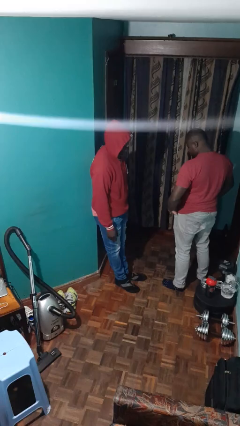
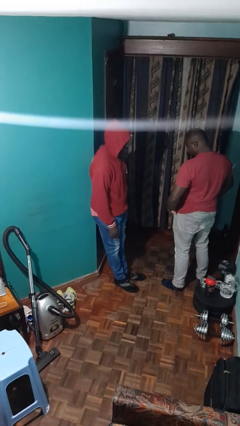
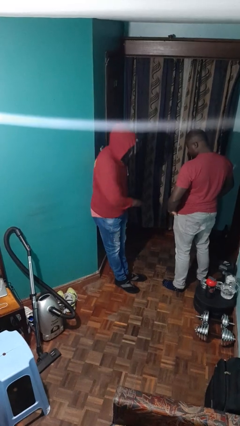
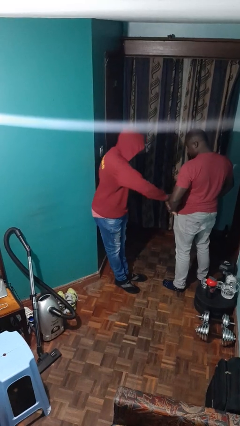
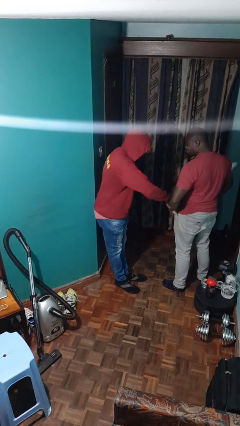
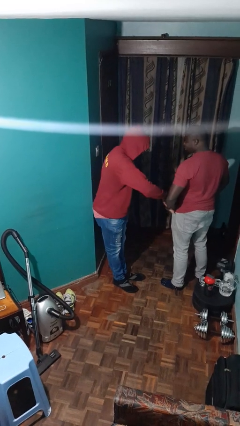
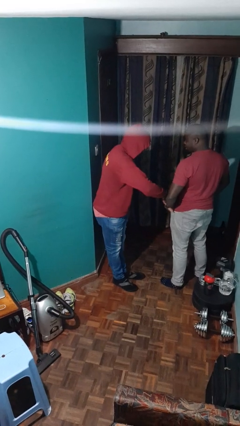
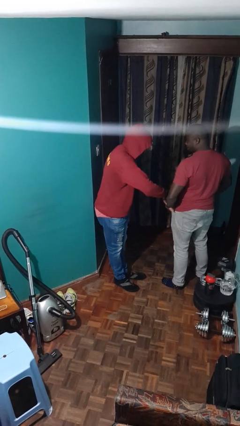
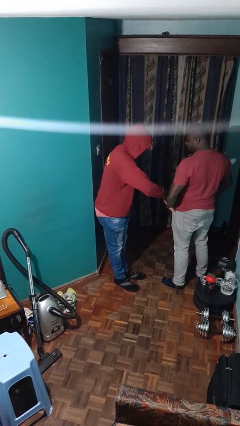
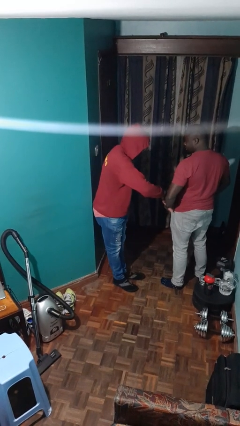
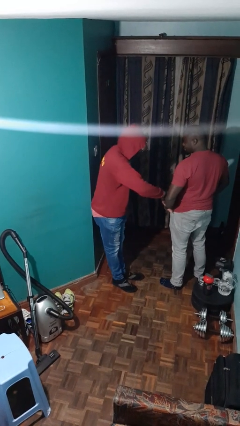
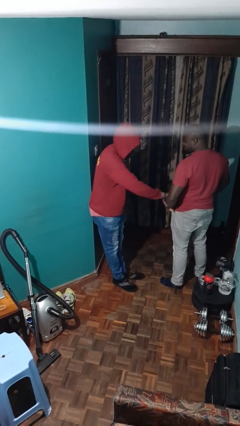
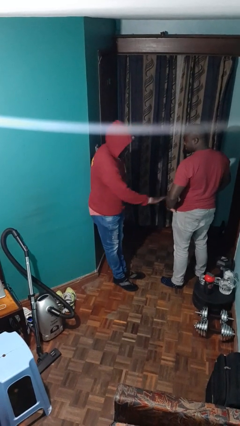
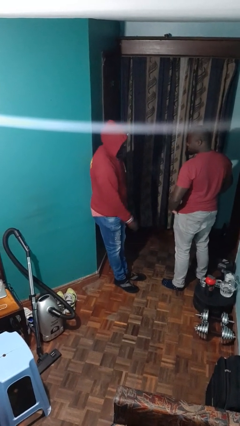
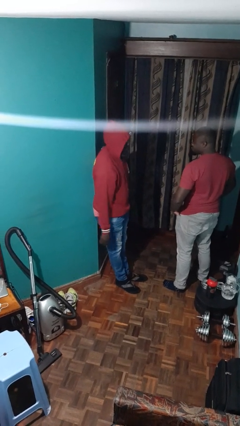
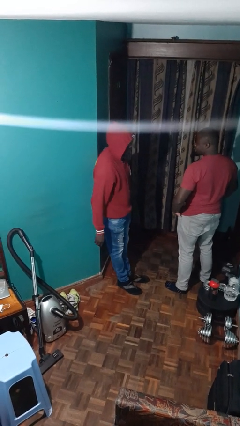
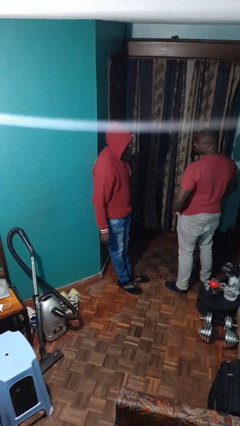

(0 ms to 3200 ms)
person grabs person by forearm

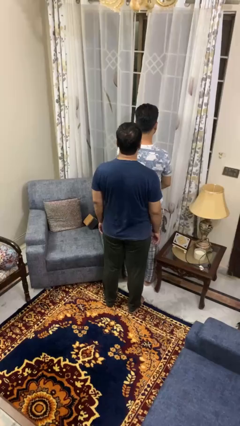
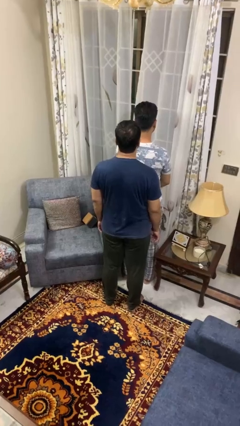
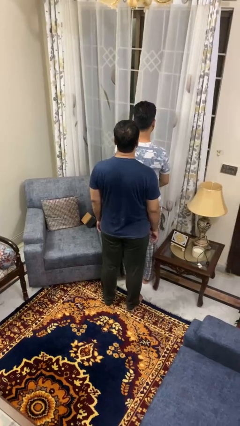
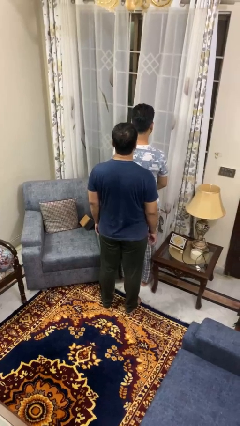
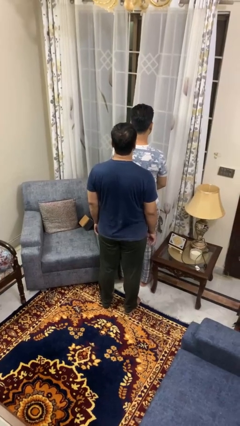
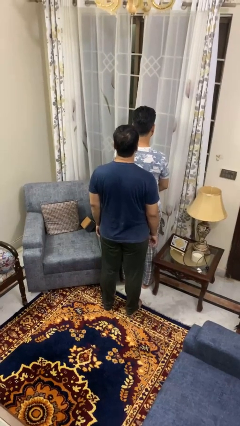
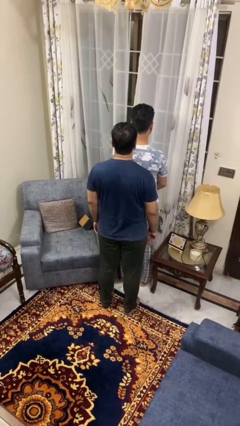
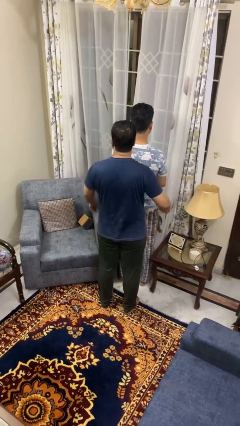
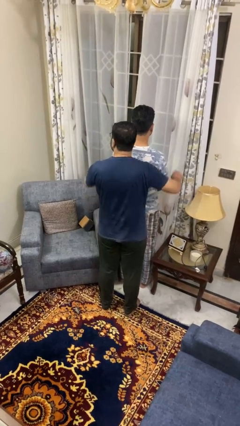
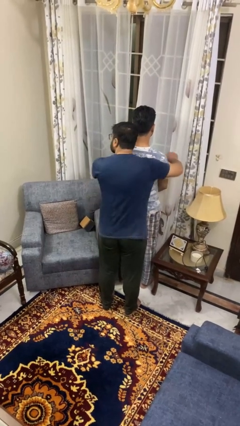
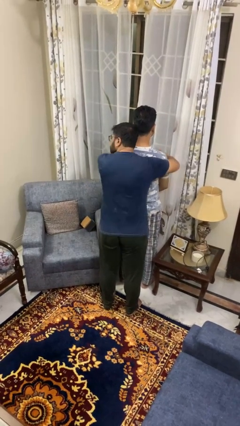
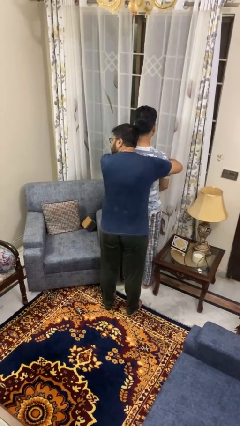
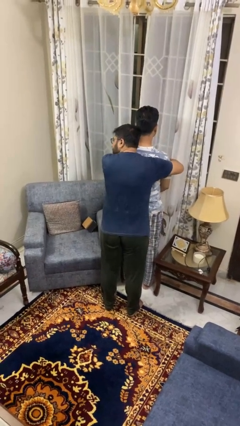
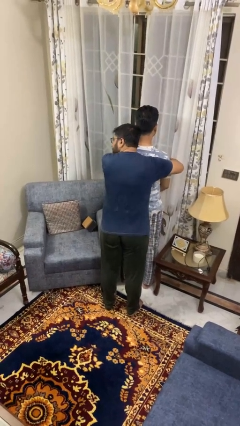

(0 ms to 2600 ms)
person hugs person from behind

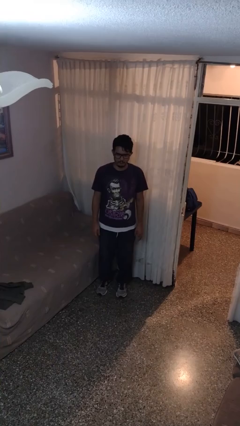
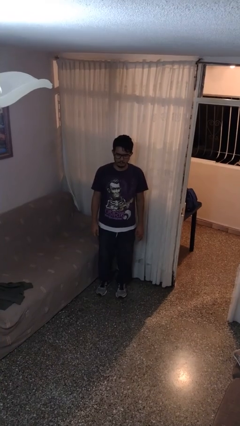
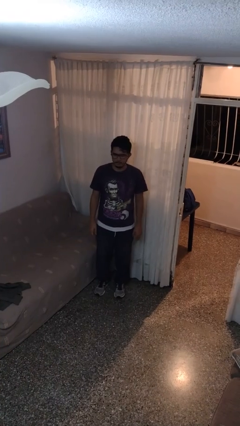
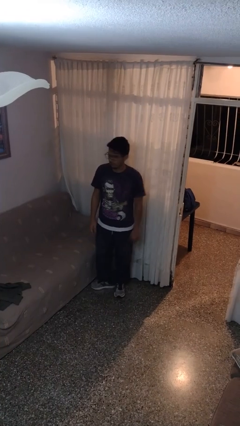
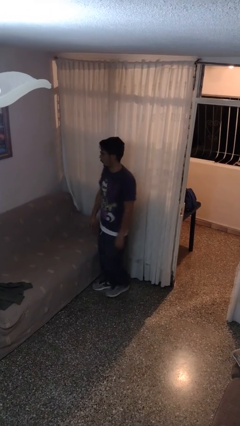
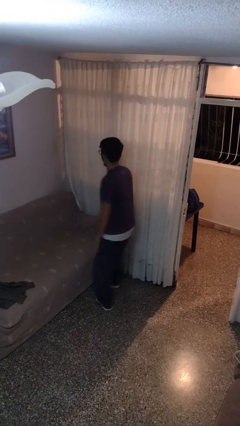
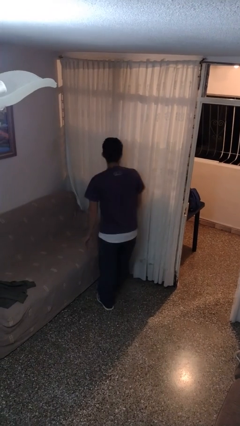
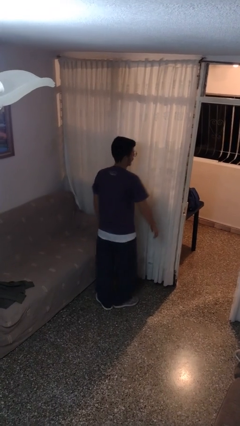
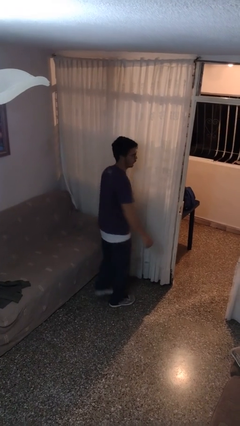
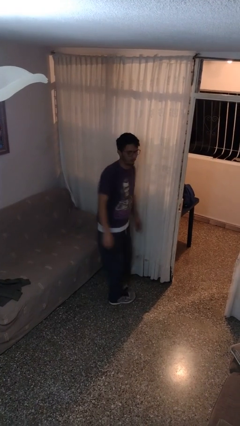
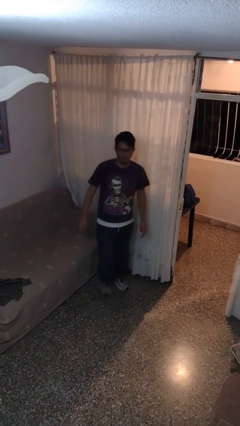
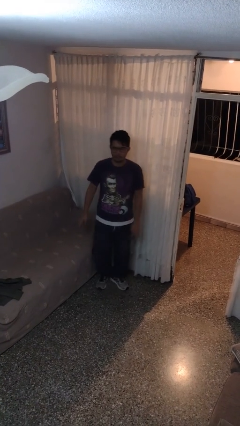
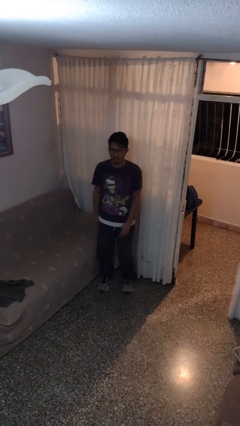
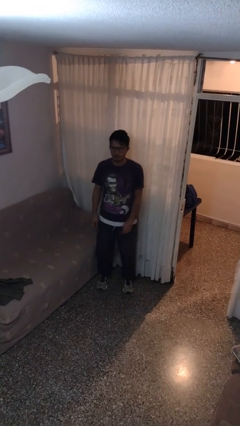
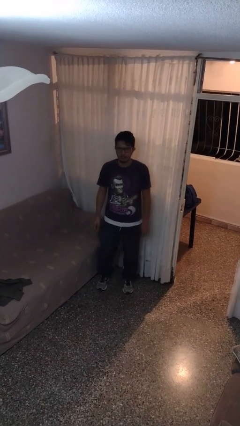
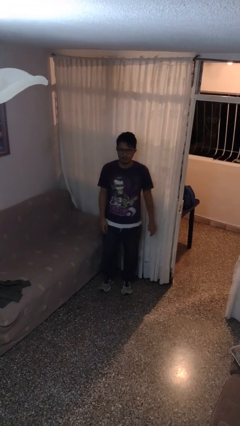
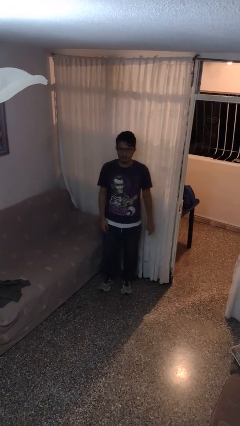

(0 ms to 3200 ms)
person twirls

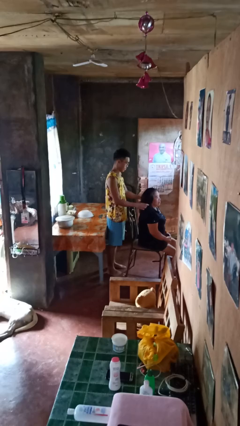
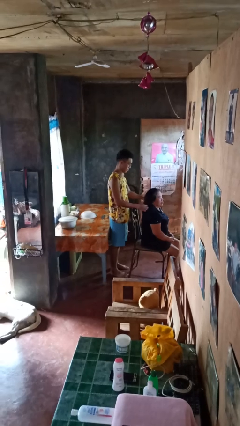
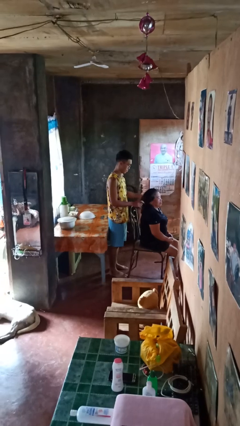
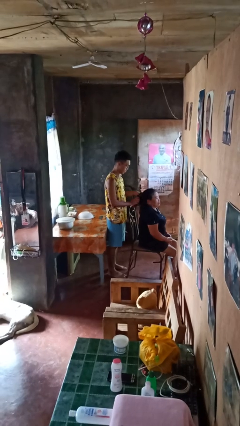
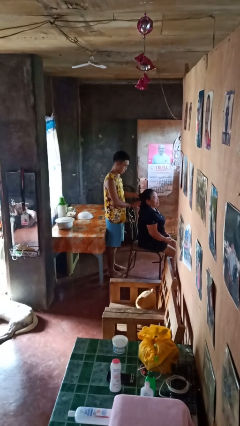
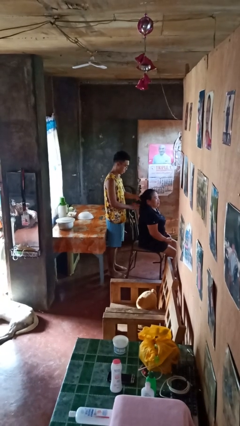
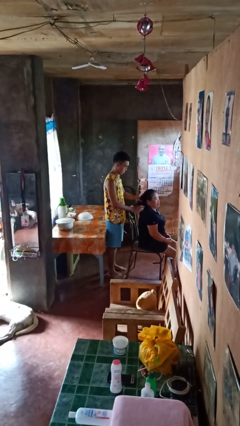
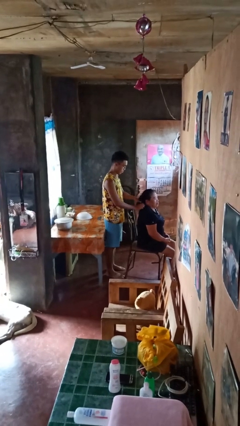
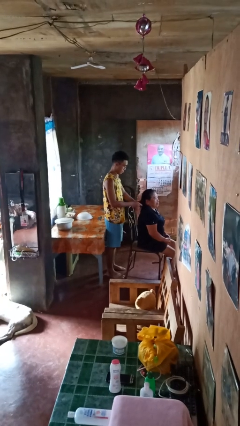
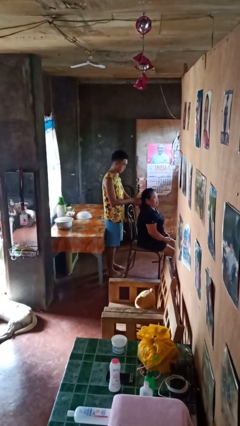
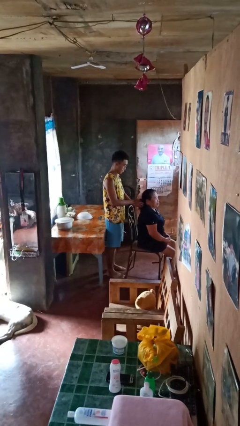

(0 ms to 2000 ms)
person braids hair of person

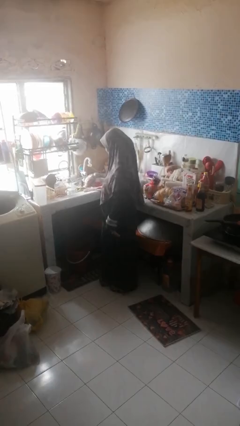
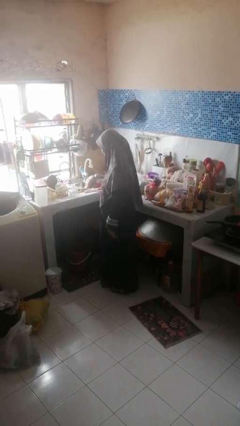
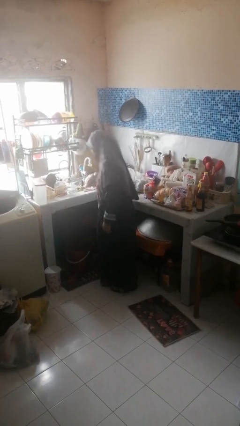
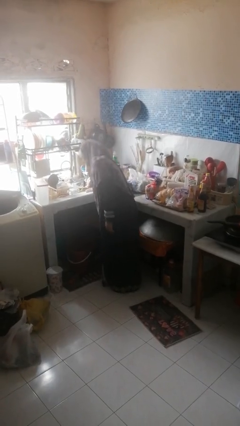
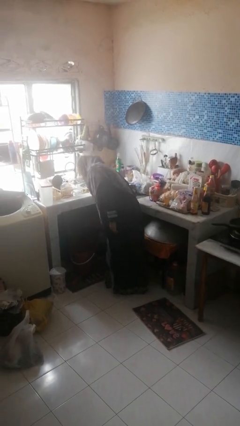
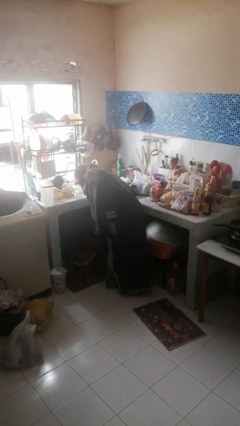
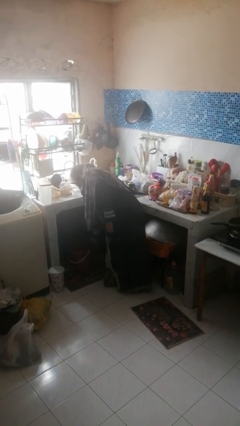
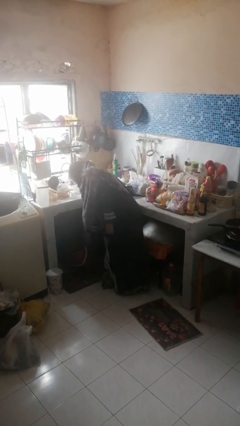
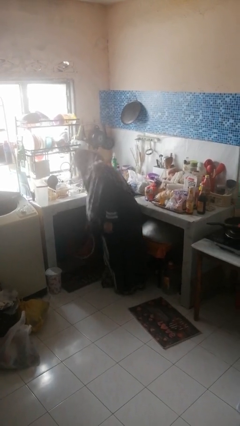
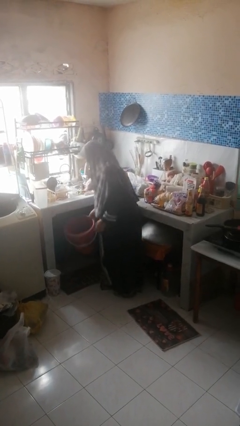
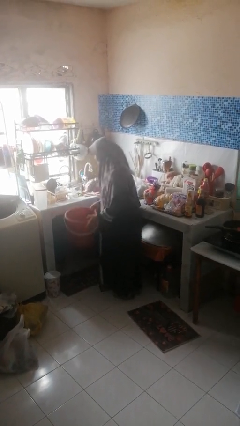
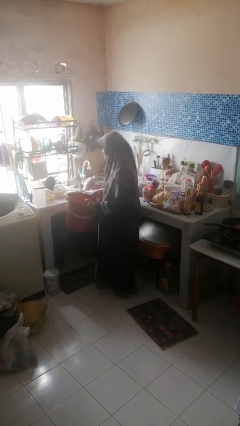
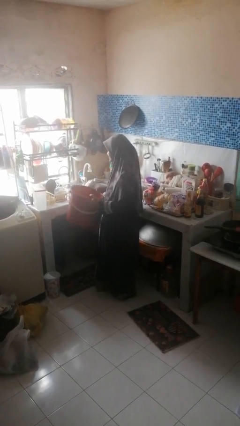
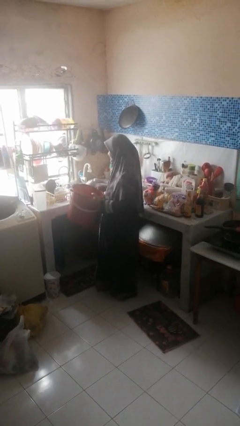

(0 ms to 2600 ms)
person picks up object from cabinet

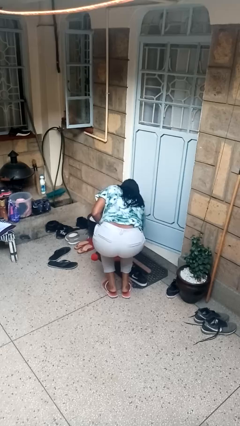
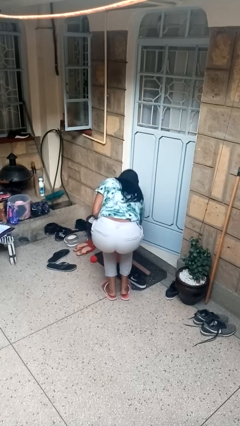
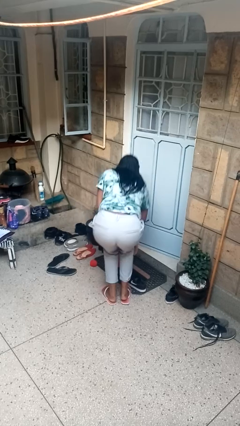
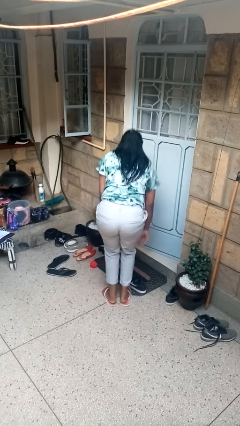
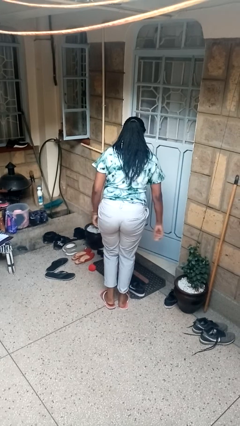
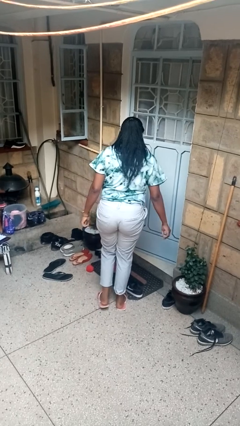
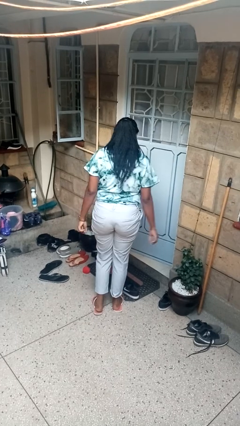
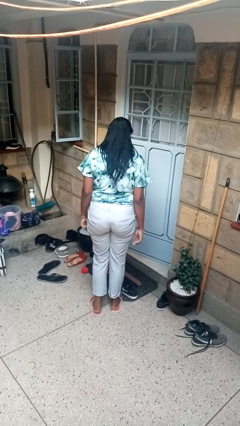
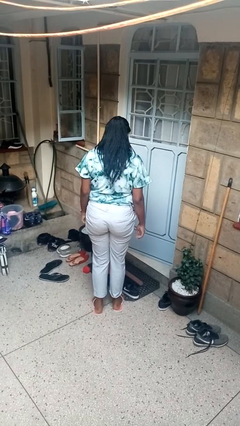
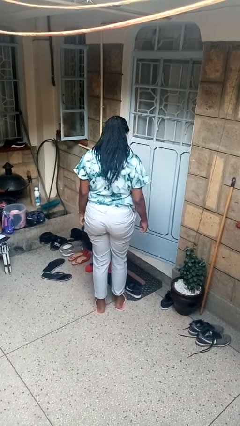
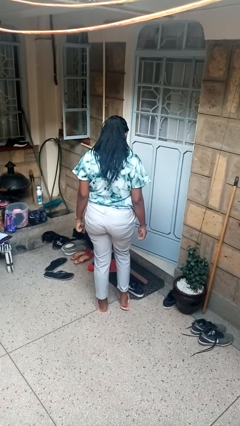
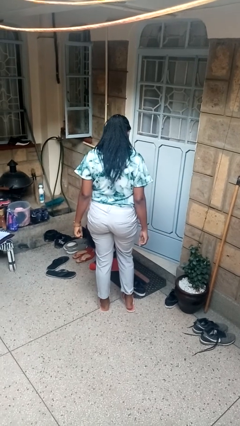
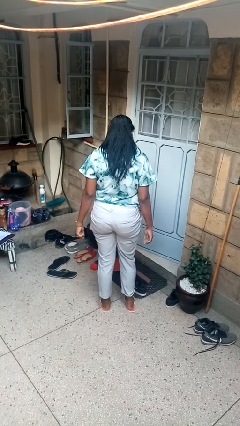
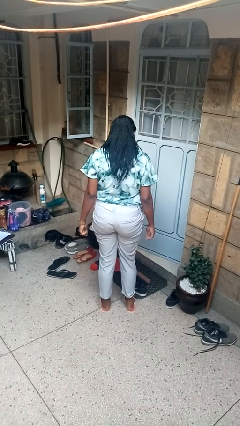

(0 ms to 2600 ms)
person stands up from floor

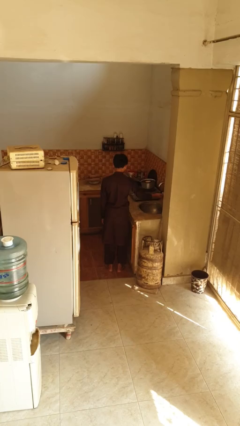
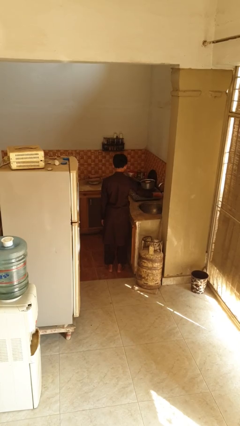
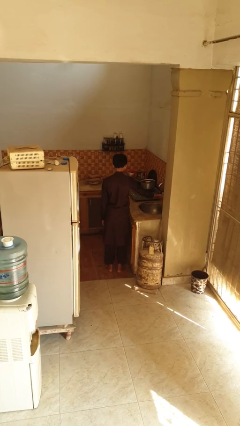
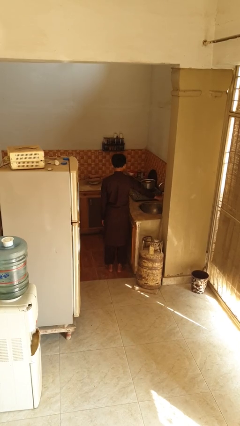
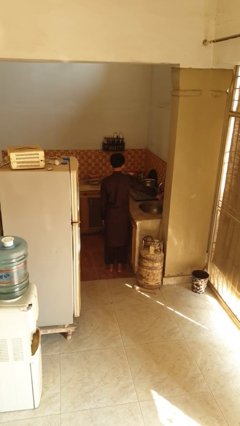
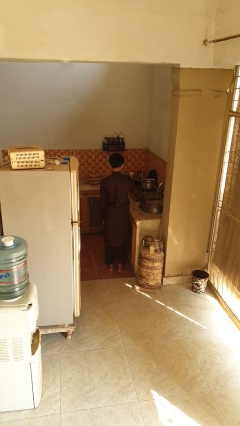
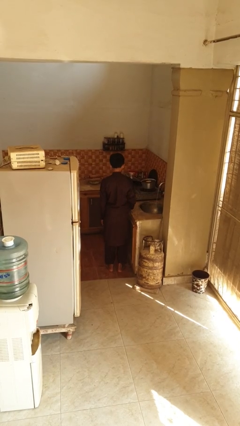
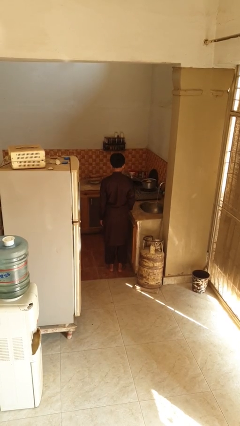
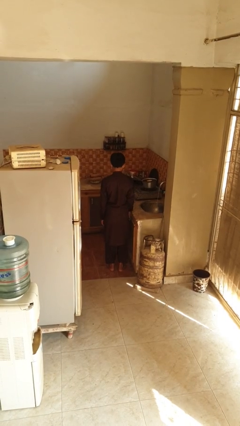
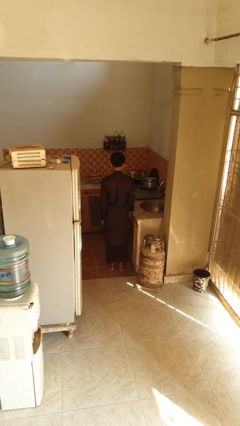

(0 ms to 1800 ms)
person turns on faucet
